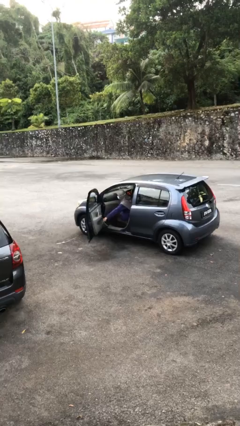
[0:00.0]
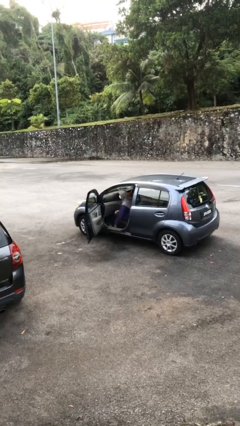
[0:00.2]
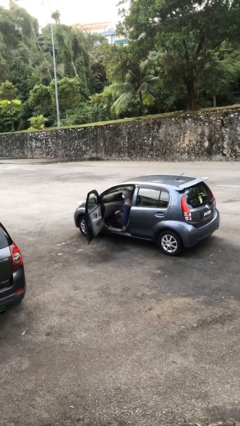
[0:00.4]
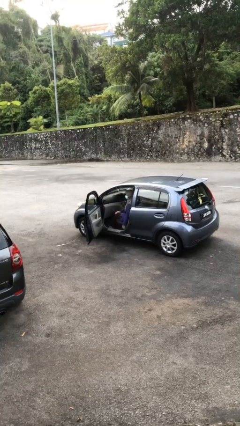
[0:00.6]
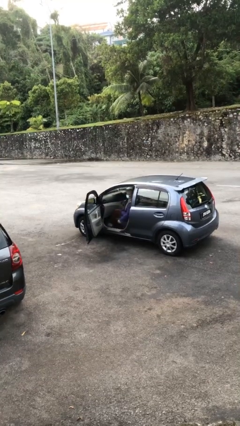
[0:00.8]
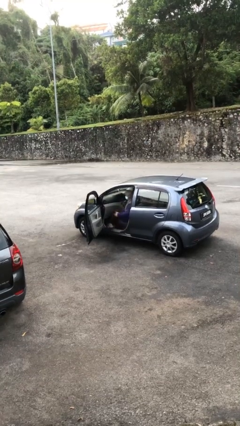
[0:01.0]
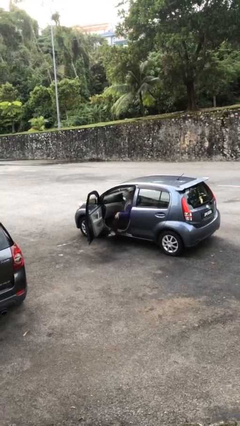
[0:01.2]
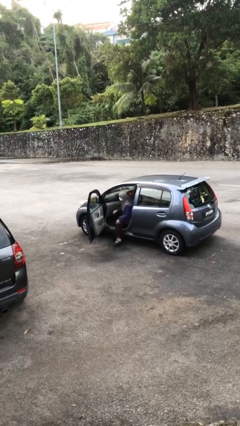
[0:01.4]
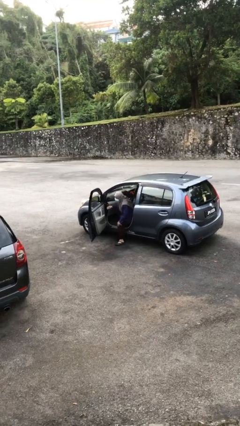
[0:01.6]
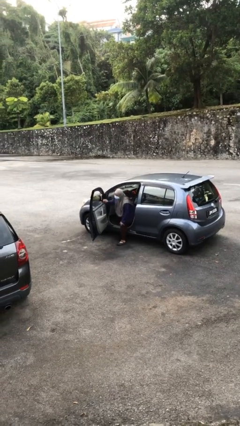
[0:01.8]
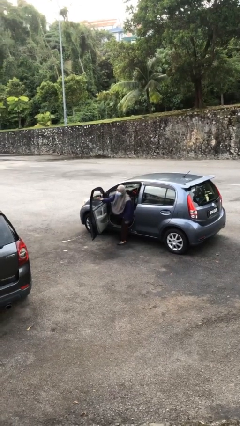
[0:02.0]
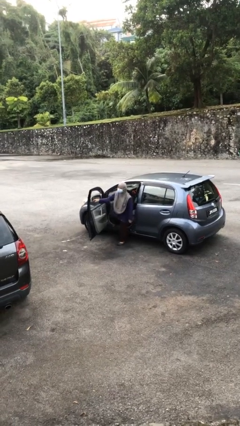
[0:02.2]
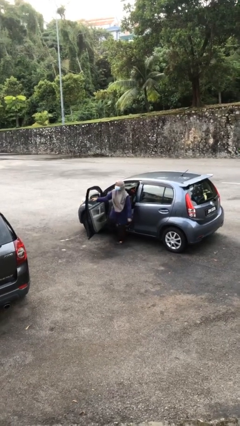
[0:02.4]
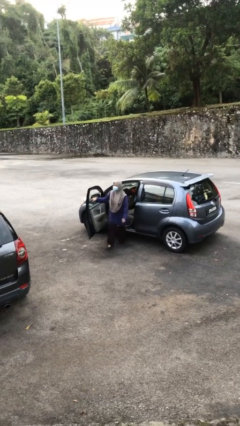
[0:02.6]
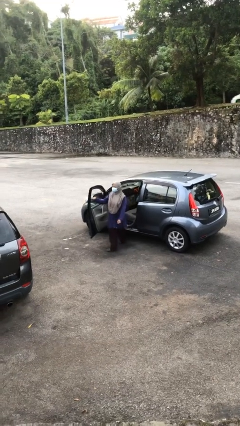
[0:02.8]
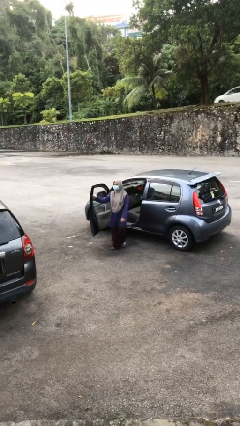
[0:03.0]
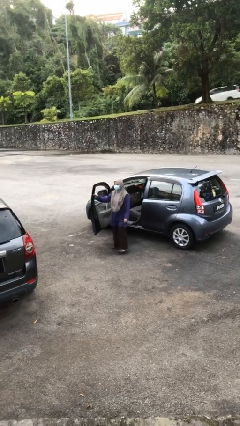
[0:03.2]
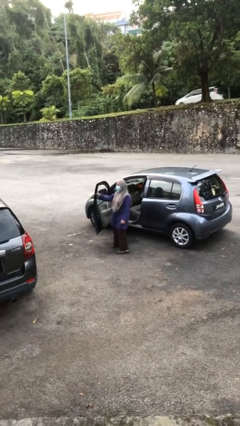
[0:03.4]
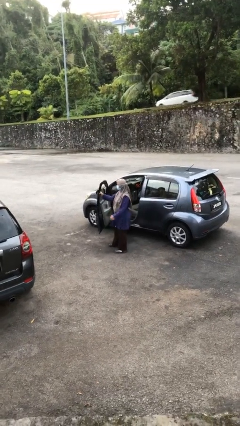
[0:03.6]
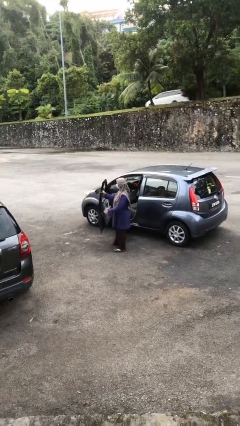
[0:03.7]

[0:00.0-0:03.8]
person exits car

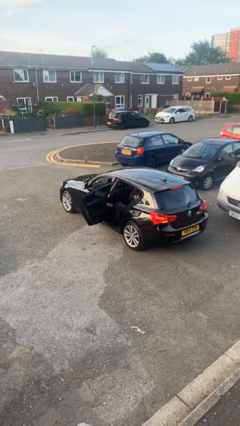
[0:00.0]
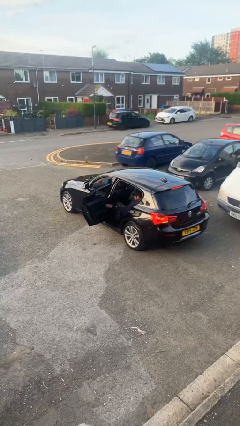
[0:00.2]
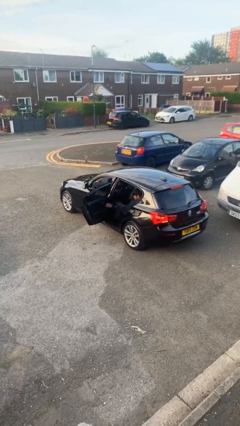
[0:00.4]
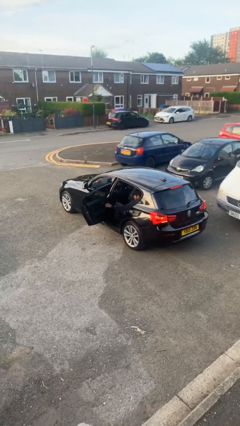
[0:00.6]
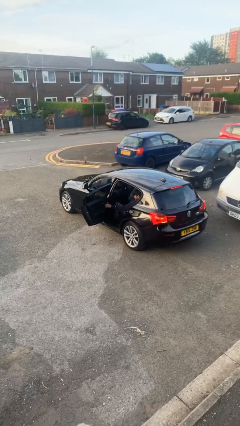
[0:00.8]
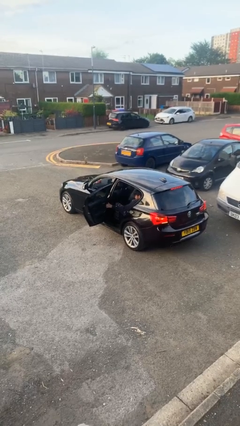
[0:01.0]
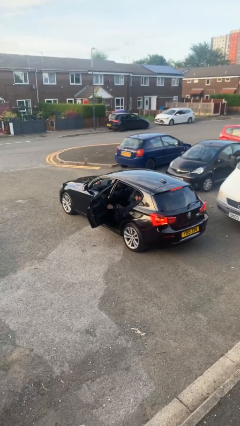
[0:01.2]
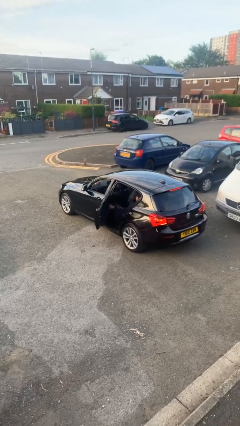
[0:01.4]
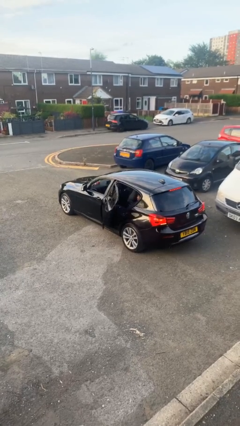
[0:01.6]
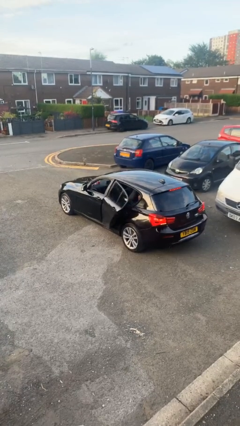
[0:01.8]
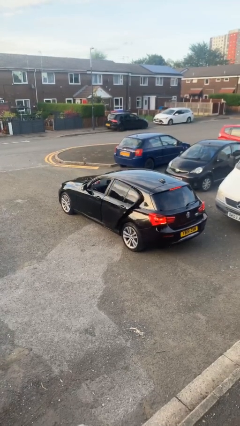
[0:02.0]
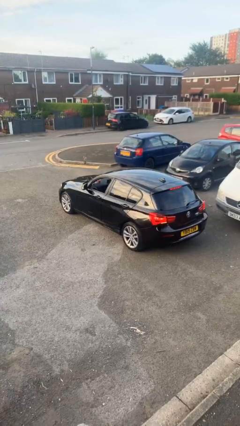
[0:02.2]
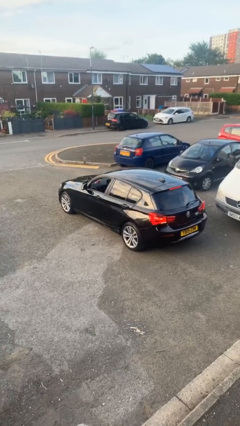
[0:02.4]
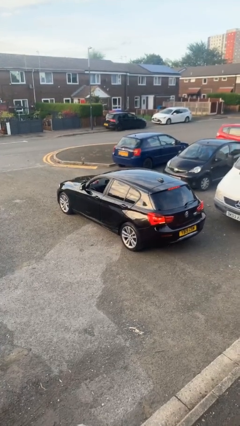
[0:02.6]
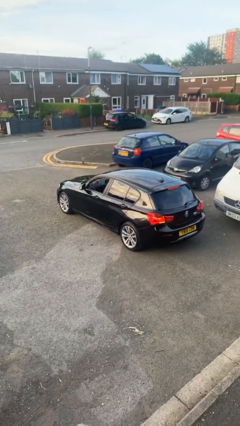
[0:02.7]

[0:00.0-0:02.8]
person closes car door

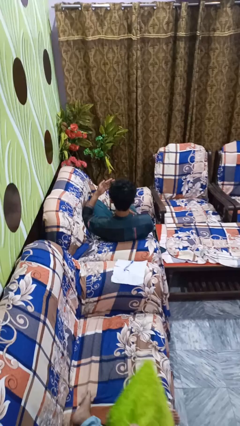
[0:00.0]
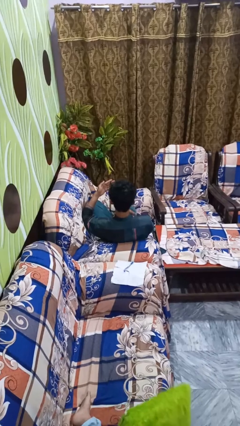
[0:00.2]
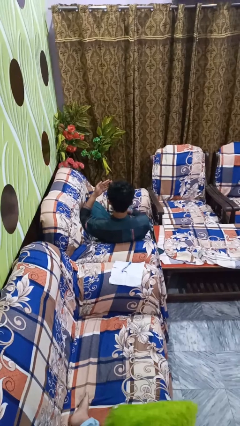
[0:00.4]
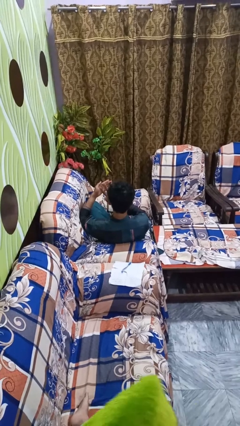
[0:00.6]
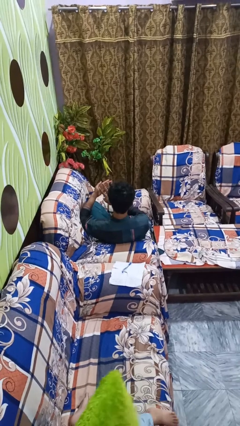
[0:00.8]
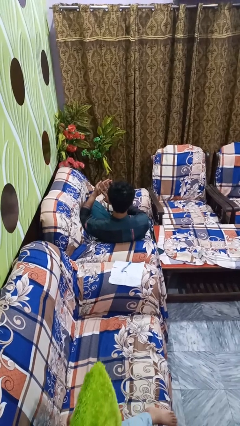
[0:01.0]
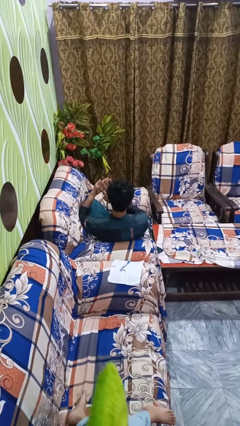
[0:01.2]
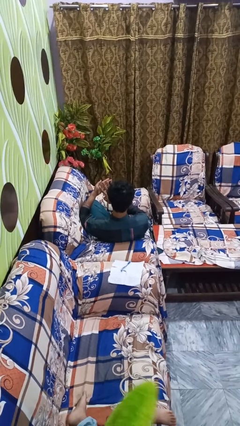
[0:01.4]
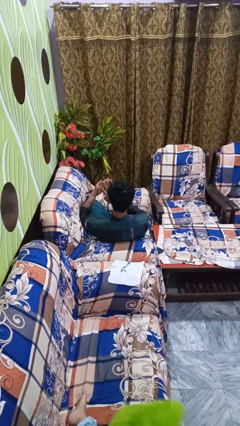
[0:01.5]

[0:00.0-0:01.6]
person gestures number three

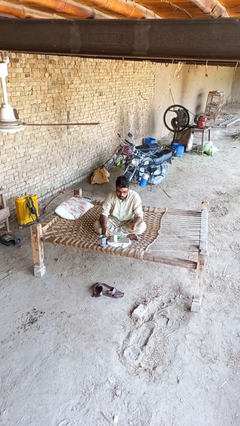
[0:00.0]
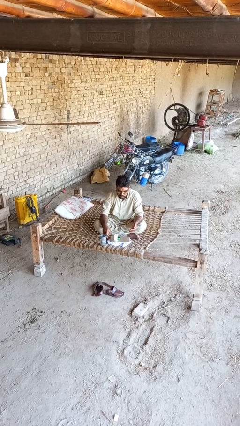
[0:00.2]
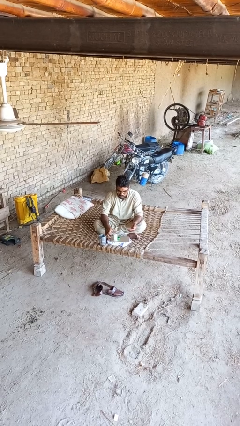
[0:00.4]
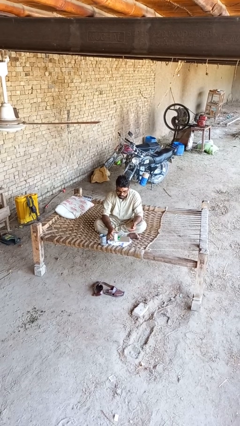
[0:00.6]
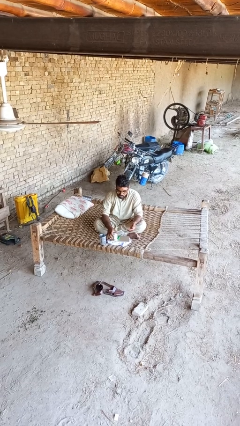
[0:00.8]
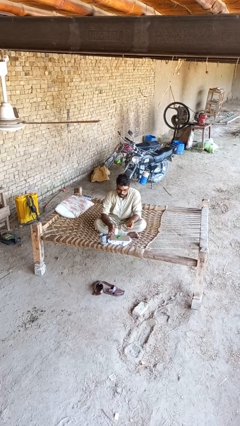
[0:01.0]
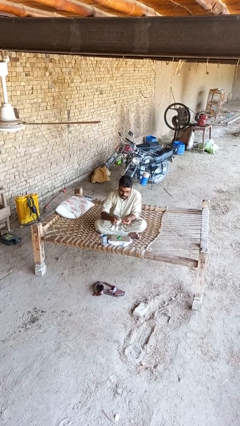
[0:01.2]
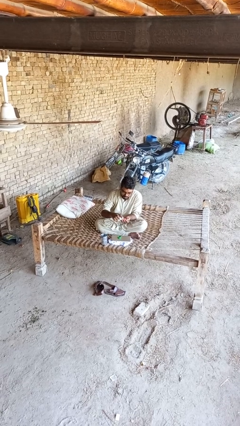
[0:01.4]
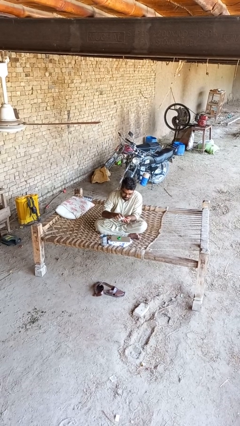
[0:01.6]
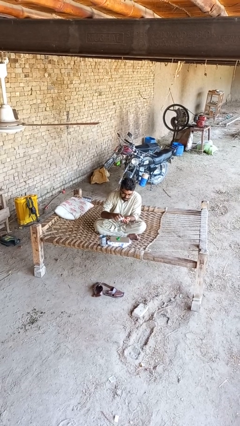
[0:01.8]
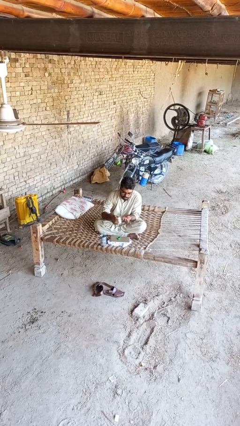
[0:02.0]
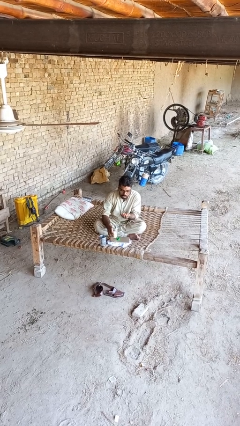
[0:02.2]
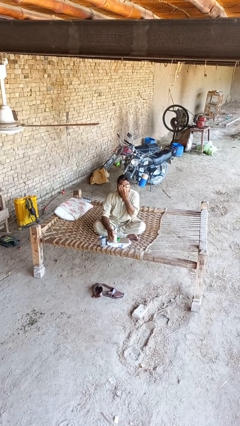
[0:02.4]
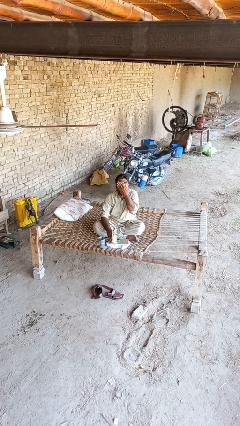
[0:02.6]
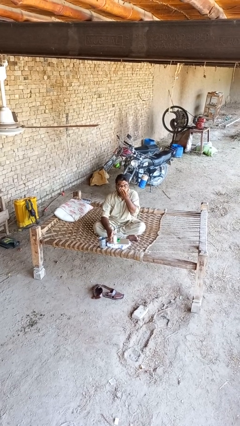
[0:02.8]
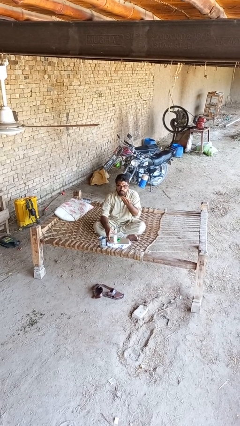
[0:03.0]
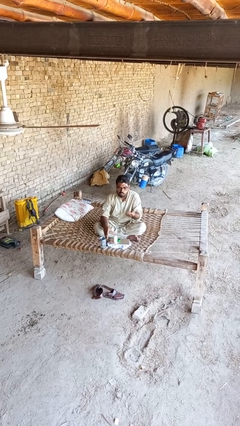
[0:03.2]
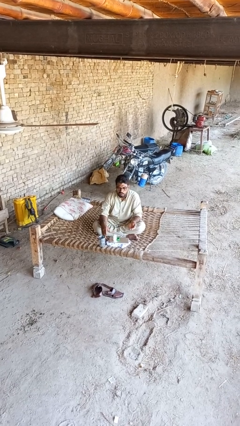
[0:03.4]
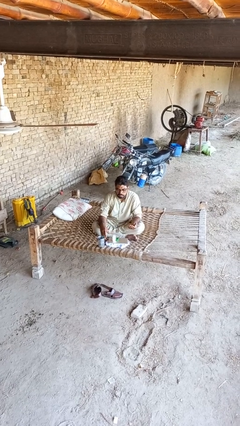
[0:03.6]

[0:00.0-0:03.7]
person takes medicine pills

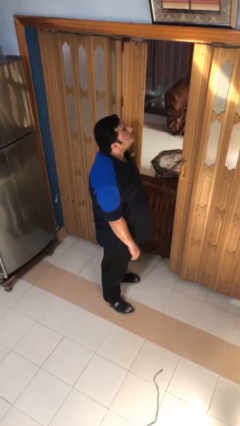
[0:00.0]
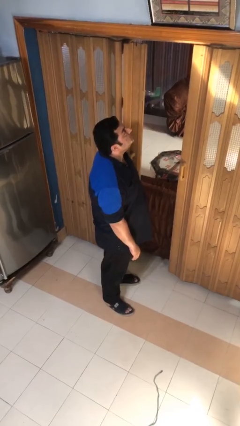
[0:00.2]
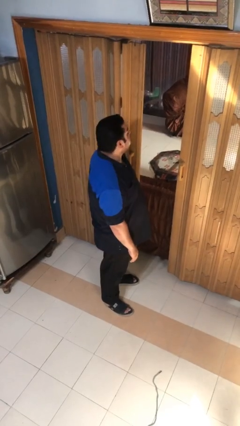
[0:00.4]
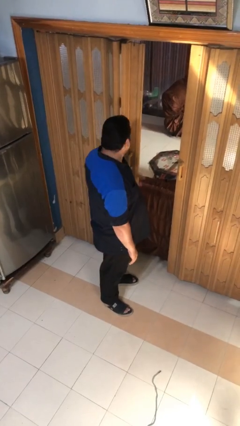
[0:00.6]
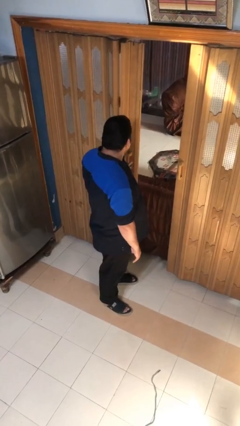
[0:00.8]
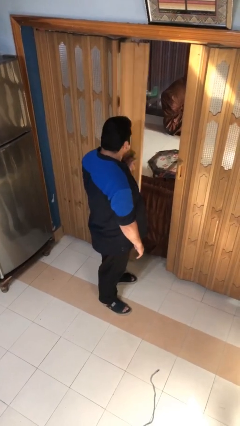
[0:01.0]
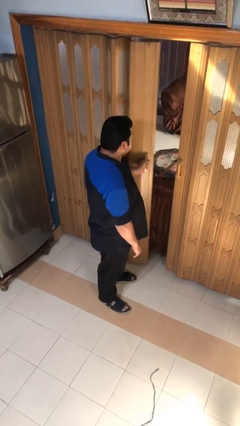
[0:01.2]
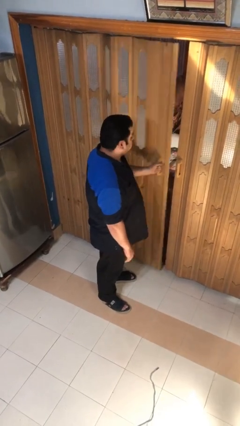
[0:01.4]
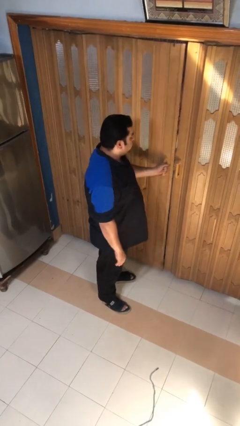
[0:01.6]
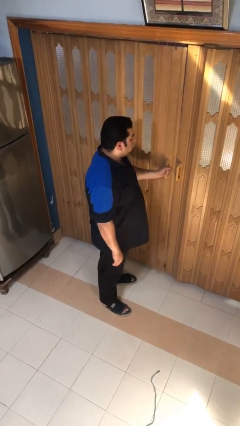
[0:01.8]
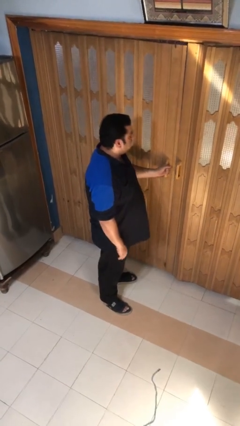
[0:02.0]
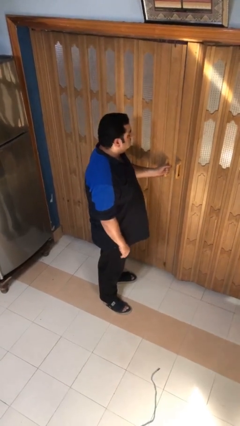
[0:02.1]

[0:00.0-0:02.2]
person closes sliding door

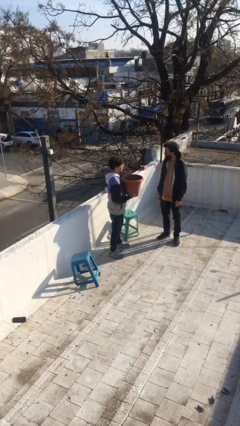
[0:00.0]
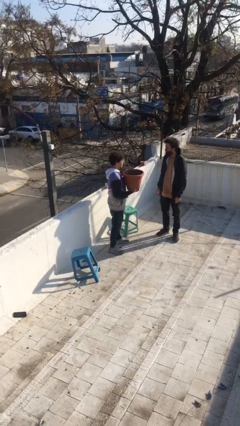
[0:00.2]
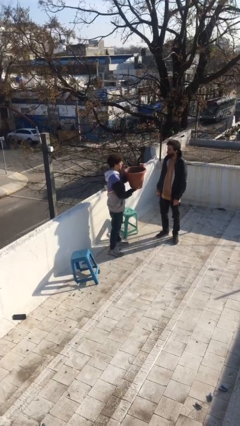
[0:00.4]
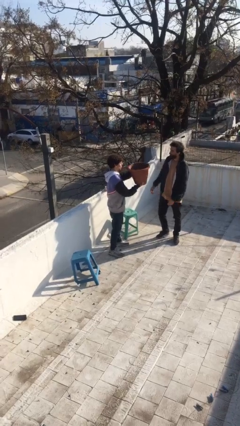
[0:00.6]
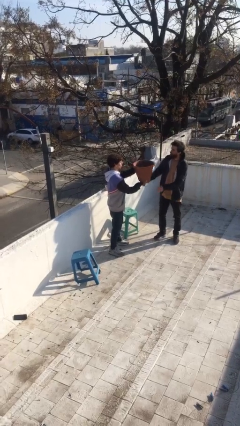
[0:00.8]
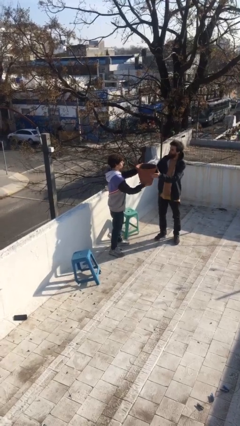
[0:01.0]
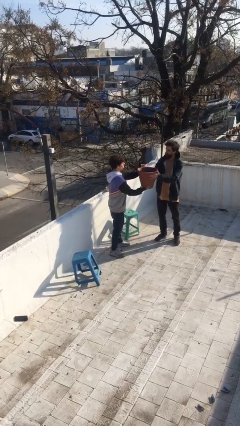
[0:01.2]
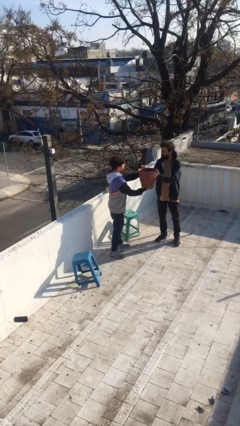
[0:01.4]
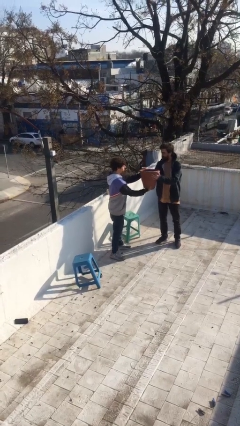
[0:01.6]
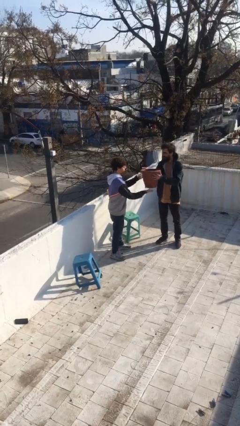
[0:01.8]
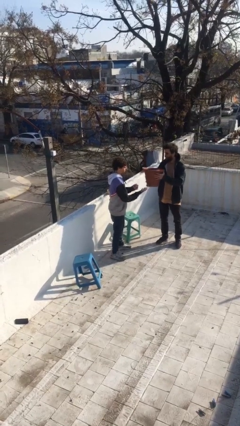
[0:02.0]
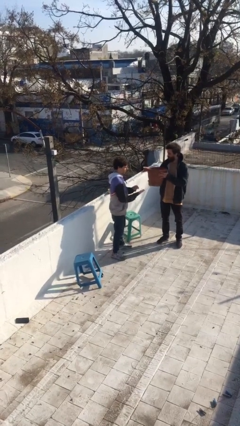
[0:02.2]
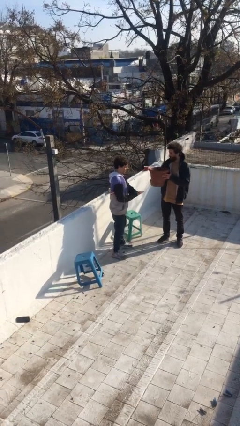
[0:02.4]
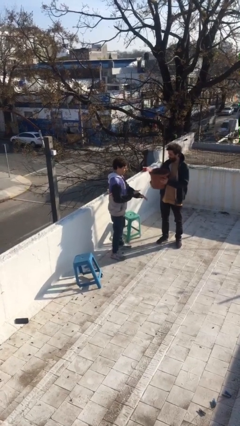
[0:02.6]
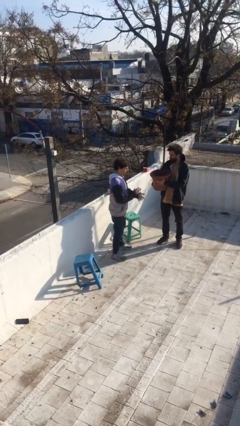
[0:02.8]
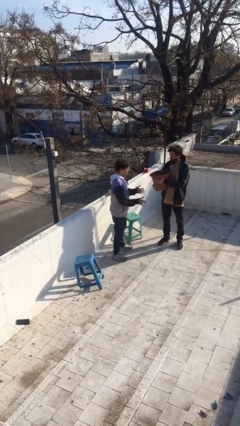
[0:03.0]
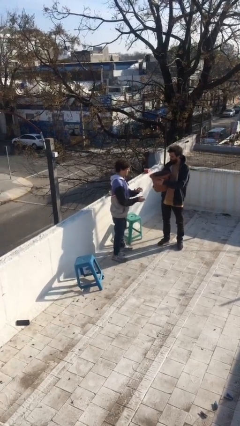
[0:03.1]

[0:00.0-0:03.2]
person transfers object to person
